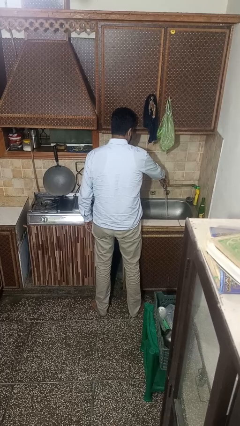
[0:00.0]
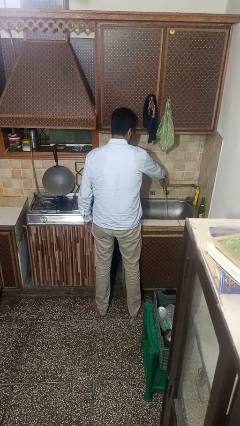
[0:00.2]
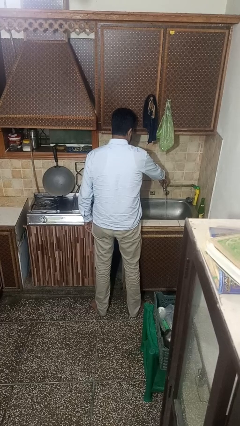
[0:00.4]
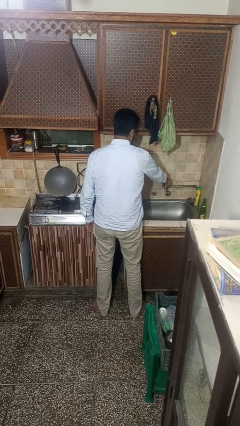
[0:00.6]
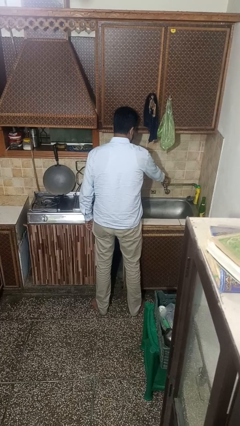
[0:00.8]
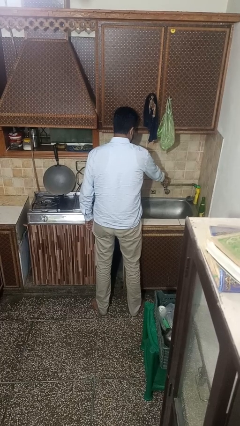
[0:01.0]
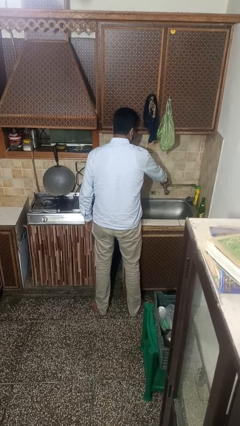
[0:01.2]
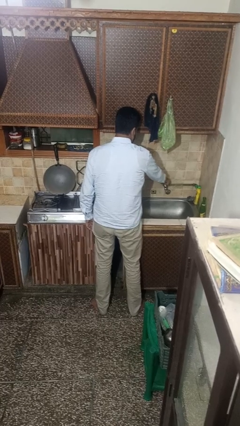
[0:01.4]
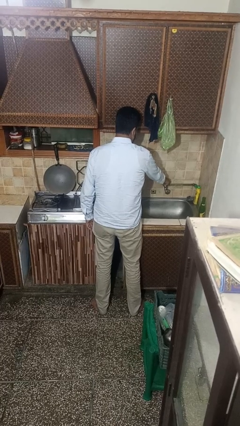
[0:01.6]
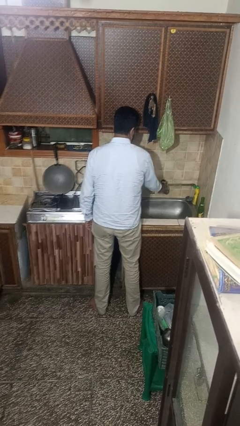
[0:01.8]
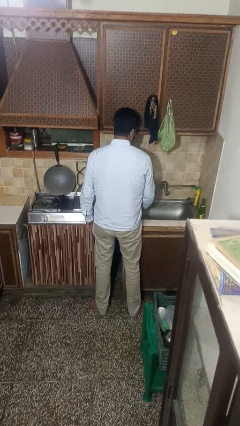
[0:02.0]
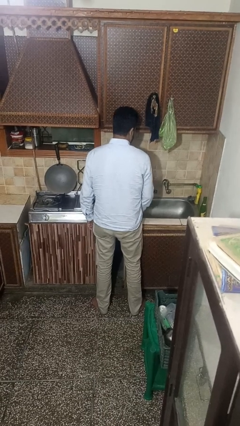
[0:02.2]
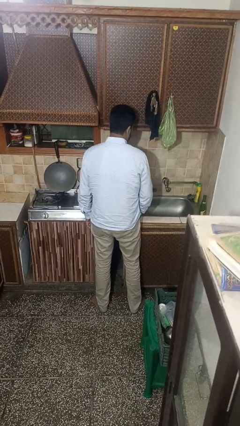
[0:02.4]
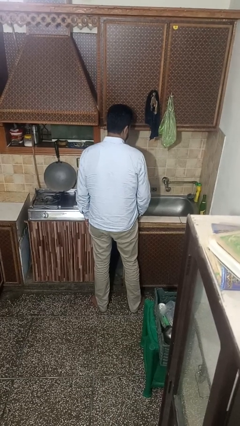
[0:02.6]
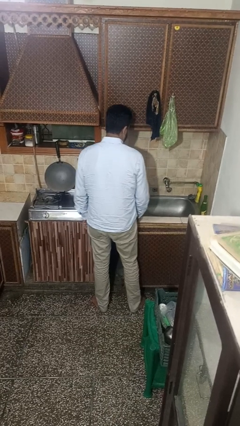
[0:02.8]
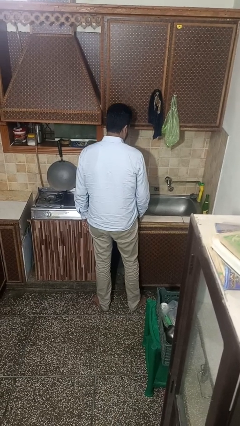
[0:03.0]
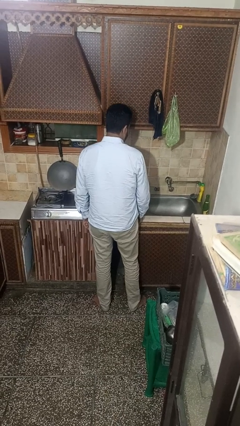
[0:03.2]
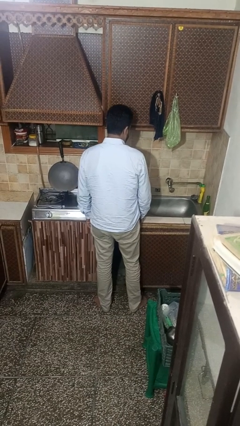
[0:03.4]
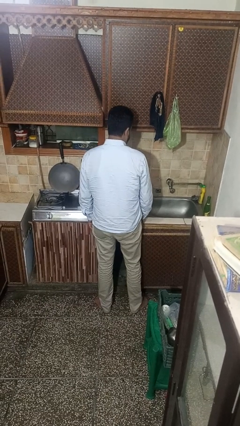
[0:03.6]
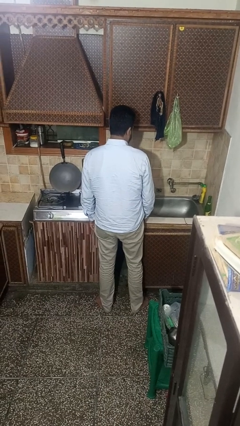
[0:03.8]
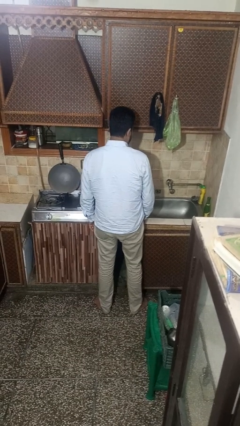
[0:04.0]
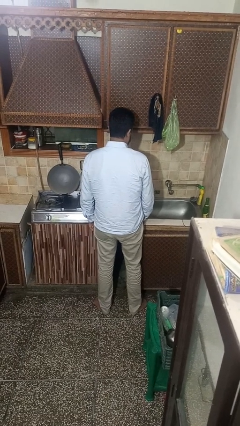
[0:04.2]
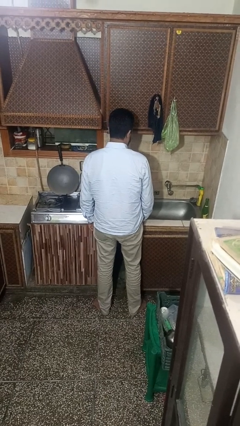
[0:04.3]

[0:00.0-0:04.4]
person turns off faucet

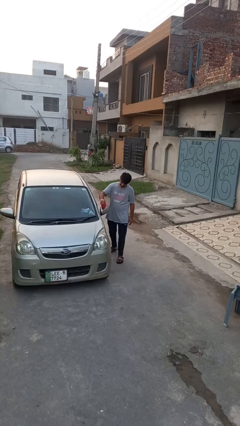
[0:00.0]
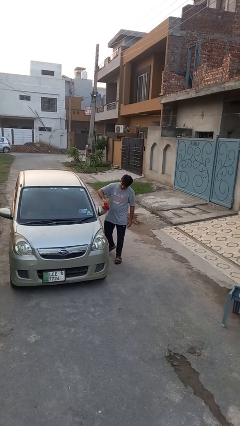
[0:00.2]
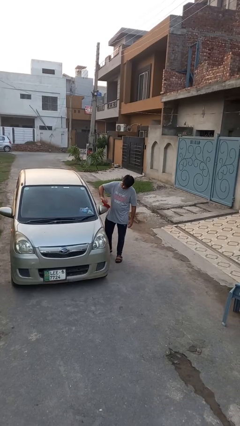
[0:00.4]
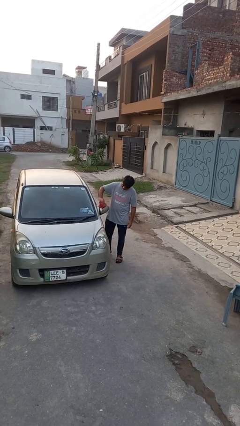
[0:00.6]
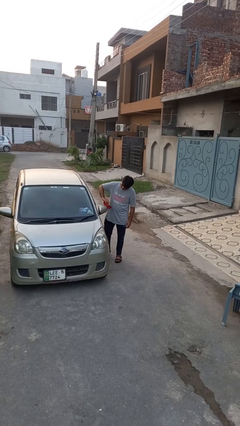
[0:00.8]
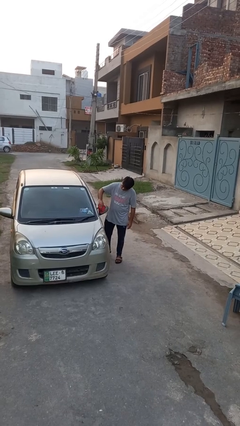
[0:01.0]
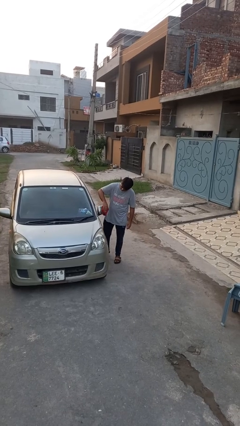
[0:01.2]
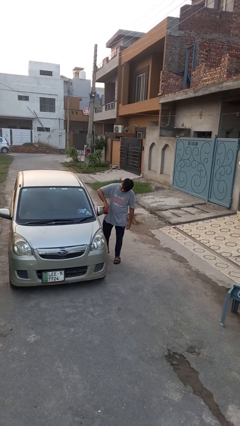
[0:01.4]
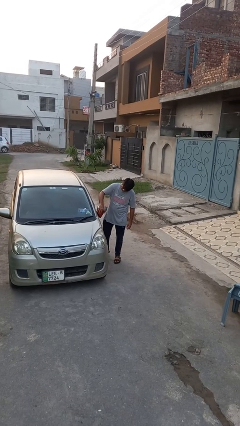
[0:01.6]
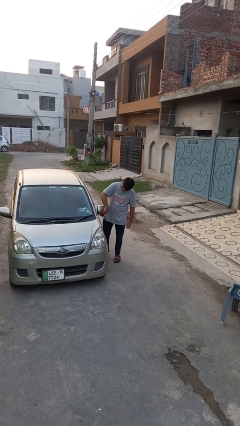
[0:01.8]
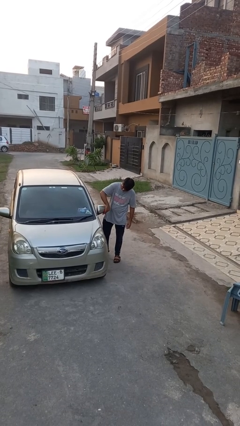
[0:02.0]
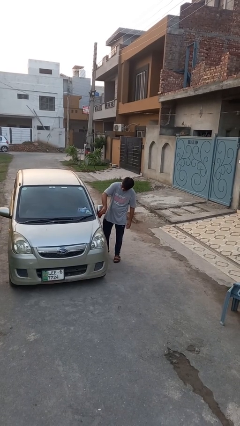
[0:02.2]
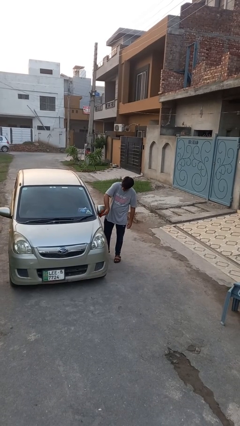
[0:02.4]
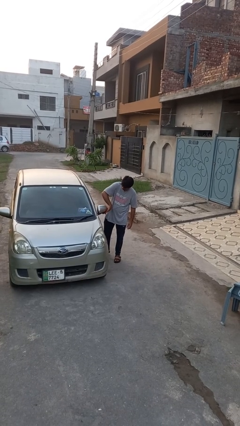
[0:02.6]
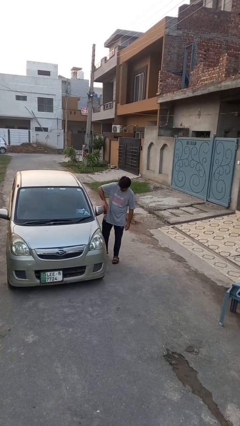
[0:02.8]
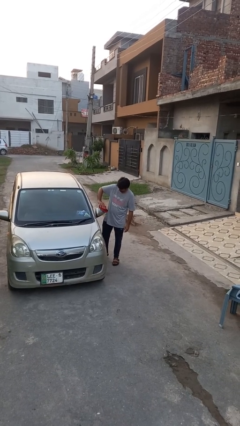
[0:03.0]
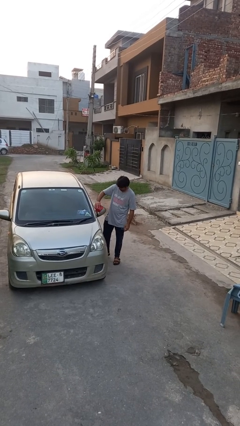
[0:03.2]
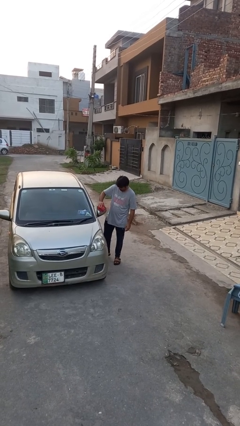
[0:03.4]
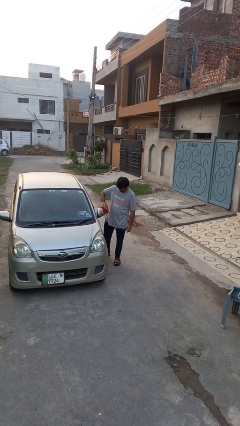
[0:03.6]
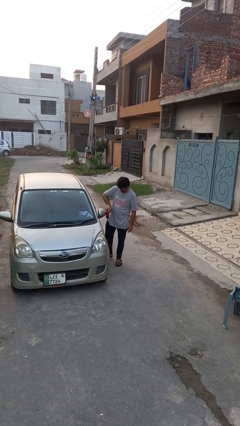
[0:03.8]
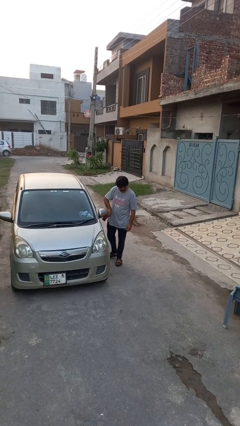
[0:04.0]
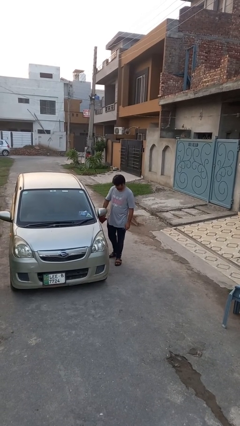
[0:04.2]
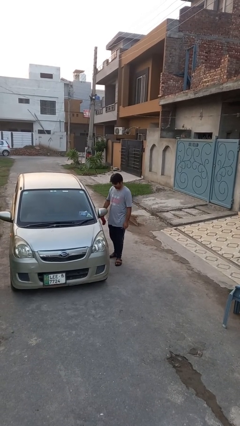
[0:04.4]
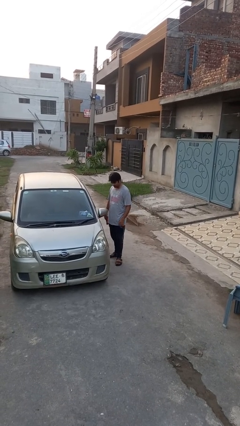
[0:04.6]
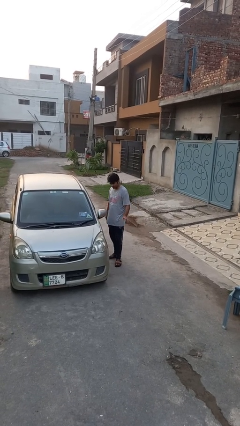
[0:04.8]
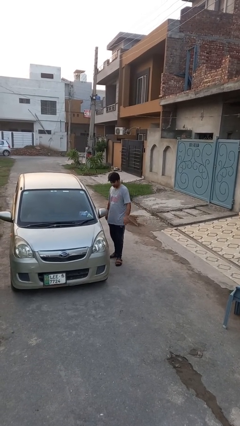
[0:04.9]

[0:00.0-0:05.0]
person polishes car with rag

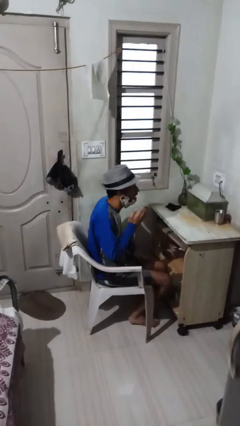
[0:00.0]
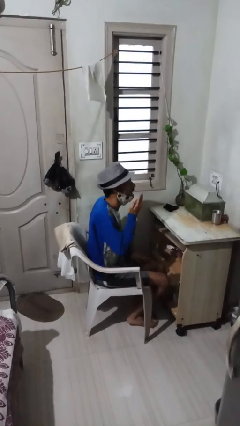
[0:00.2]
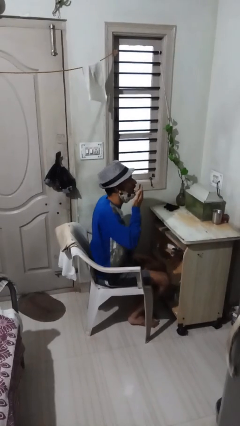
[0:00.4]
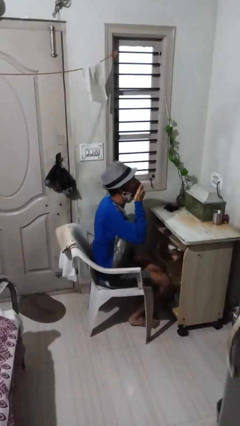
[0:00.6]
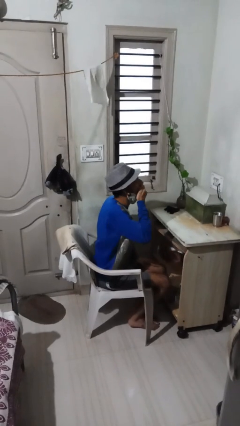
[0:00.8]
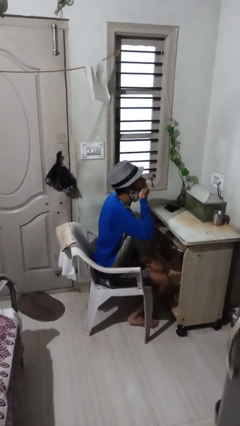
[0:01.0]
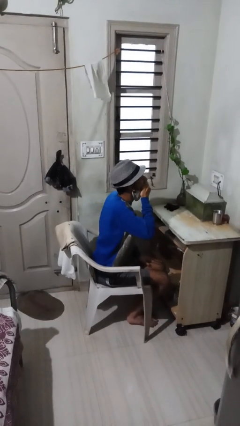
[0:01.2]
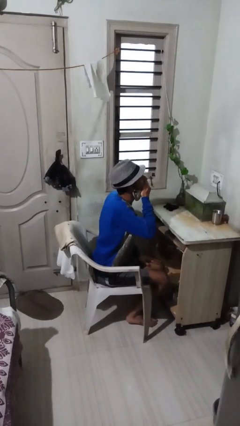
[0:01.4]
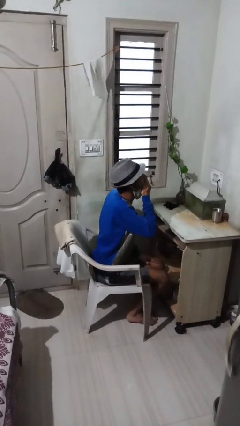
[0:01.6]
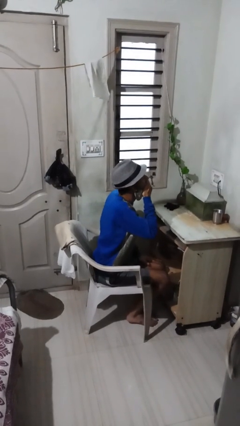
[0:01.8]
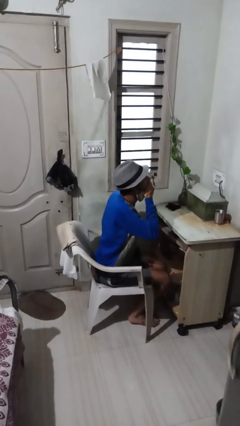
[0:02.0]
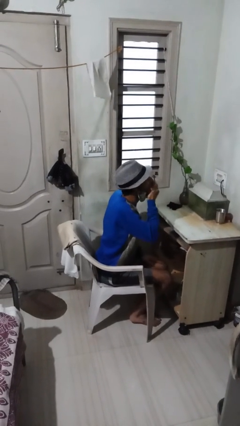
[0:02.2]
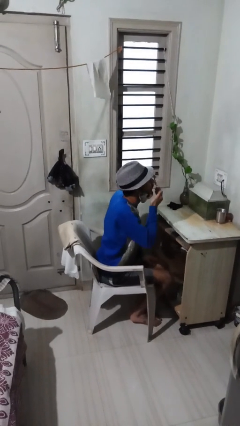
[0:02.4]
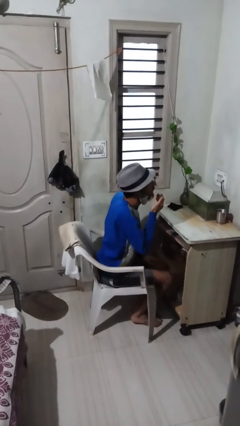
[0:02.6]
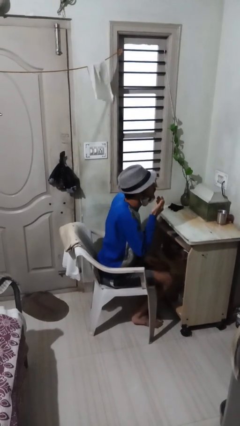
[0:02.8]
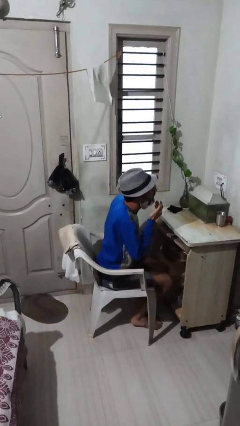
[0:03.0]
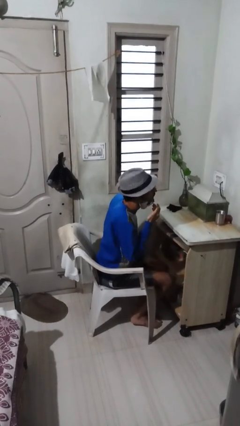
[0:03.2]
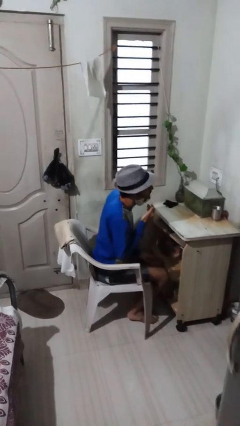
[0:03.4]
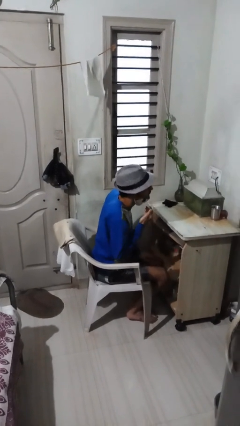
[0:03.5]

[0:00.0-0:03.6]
person yawns

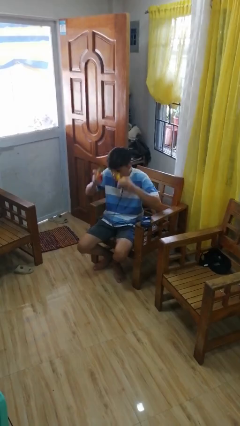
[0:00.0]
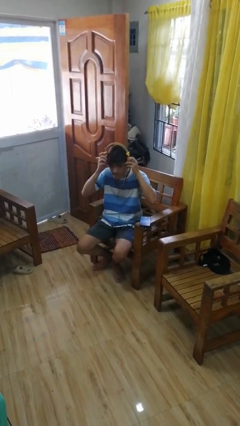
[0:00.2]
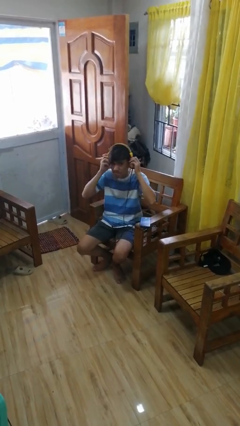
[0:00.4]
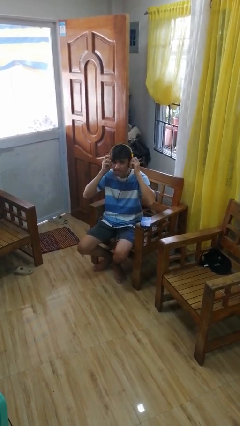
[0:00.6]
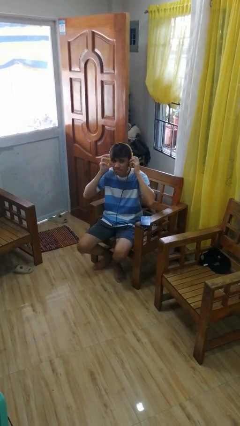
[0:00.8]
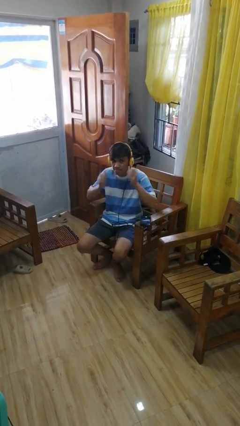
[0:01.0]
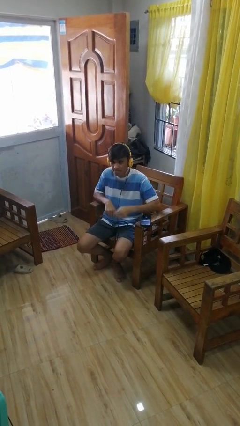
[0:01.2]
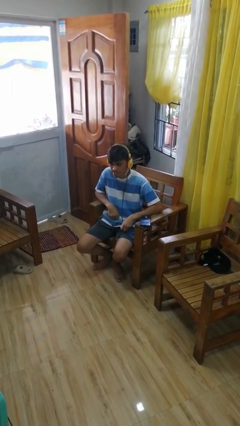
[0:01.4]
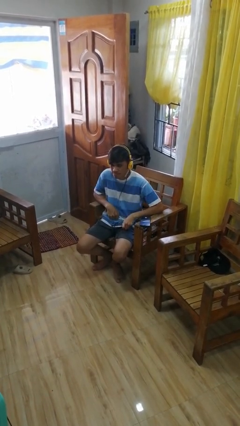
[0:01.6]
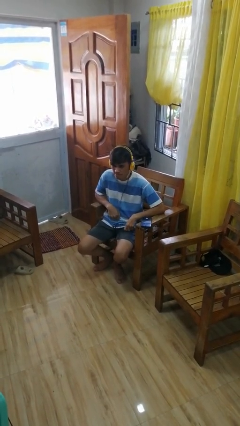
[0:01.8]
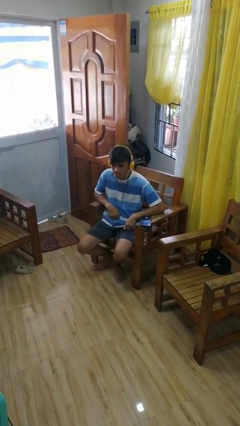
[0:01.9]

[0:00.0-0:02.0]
person puts on headphones

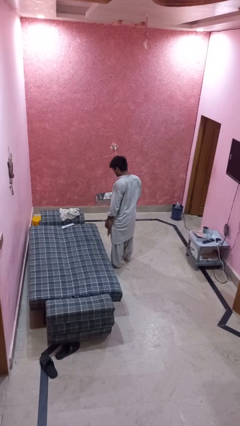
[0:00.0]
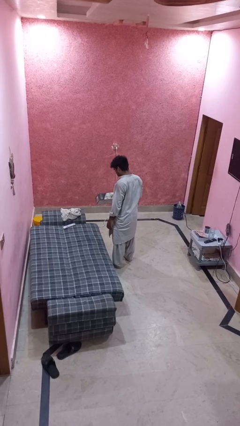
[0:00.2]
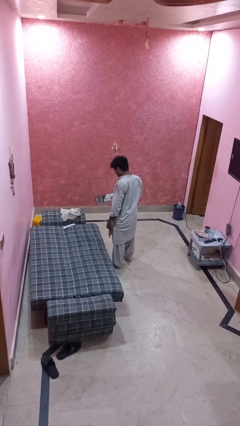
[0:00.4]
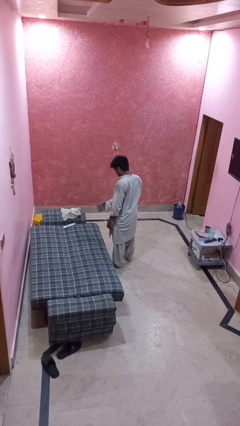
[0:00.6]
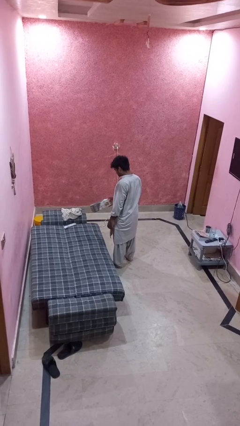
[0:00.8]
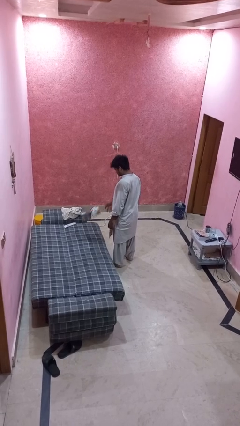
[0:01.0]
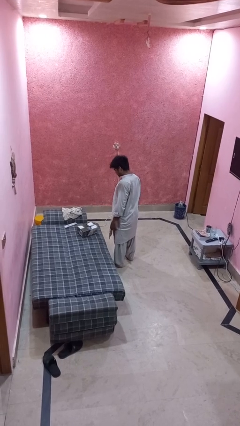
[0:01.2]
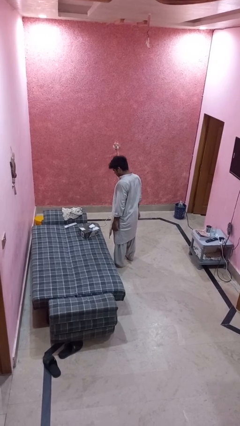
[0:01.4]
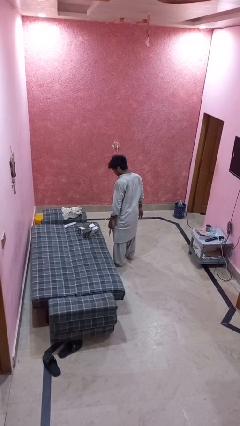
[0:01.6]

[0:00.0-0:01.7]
person throws object on bed

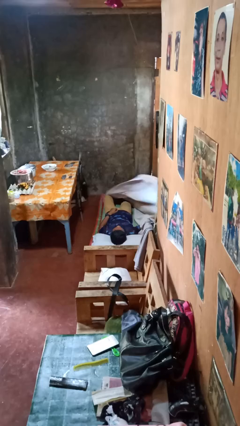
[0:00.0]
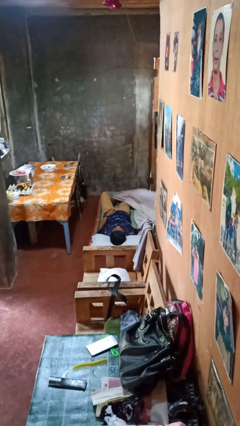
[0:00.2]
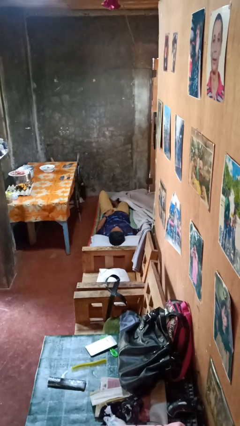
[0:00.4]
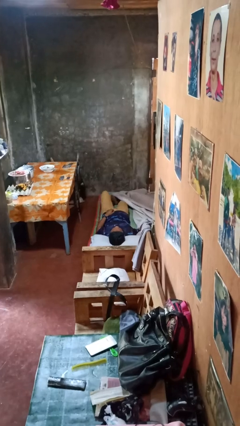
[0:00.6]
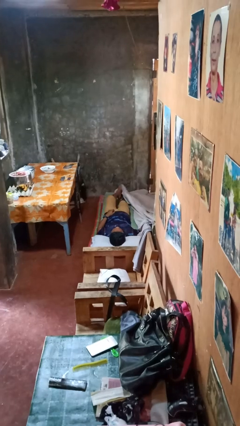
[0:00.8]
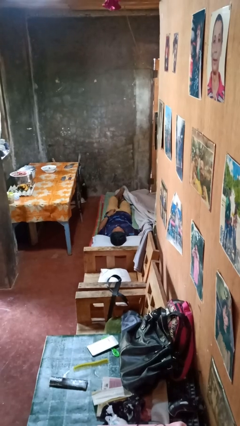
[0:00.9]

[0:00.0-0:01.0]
person uncovers with bedsheets
